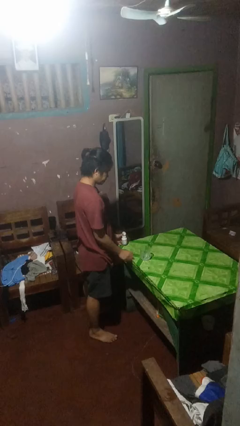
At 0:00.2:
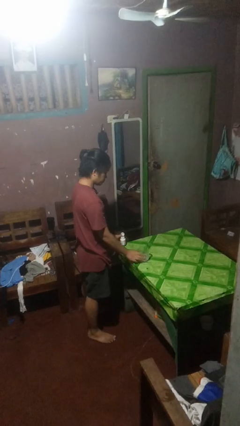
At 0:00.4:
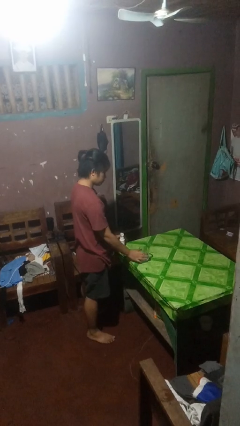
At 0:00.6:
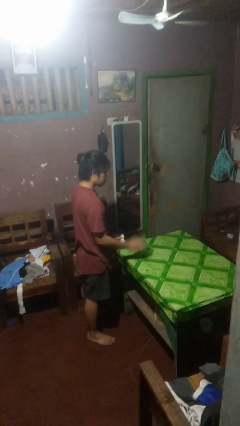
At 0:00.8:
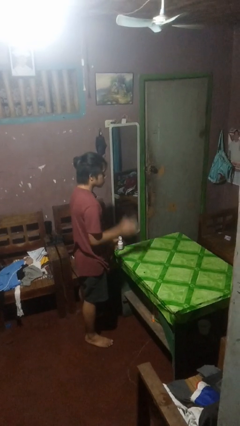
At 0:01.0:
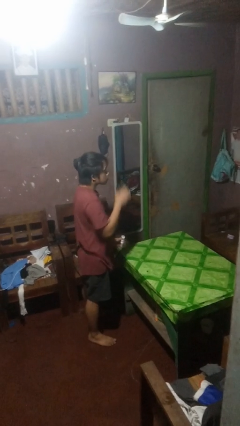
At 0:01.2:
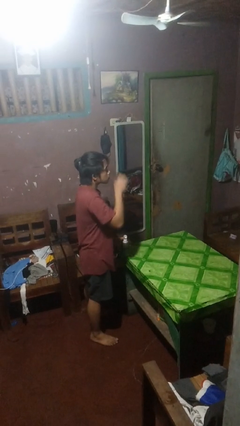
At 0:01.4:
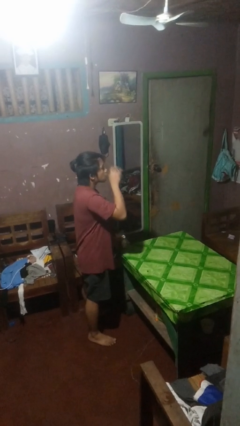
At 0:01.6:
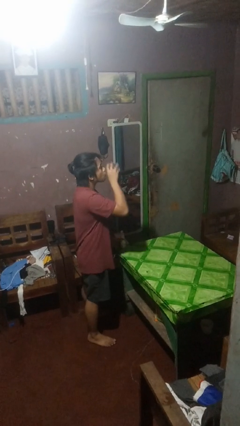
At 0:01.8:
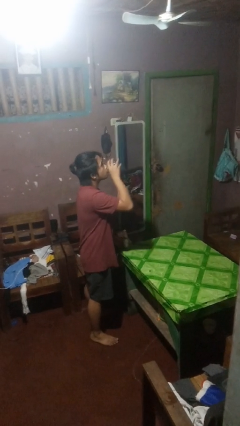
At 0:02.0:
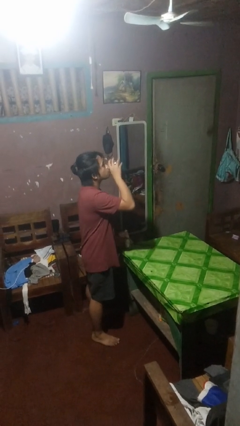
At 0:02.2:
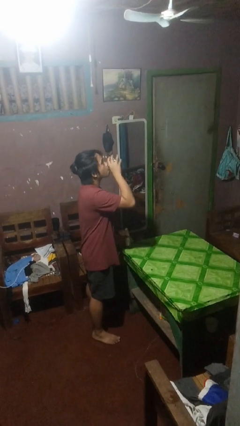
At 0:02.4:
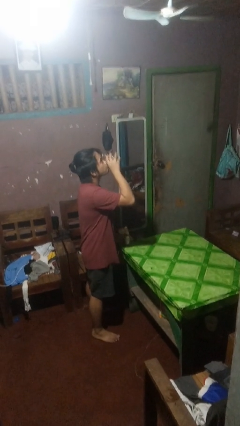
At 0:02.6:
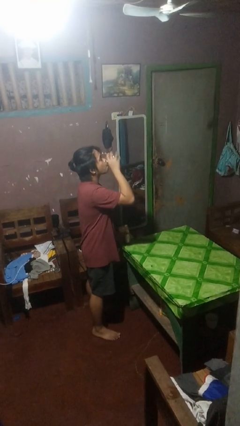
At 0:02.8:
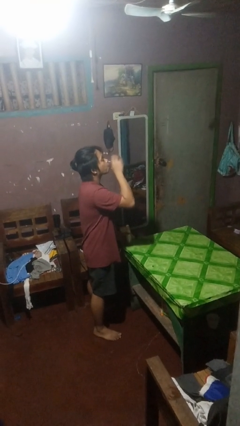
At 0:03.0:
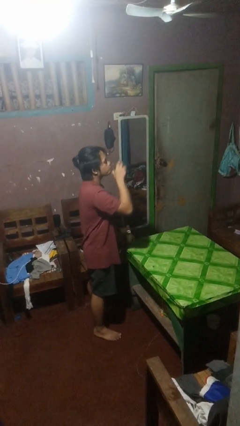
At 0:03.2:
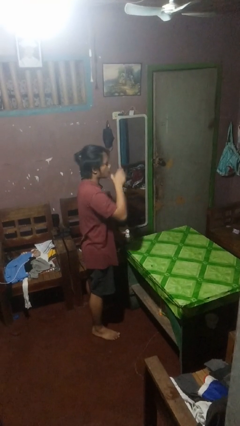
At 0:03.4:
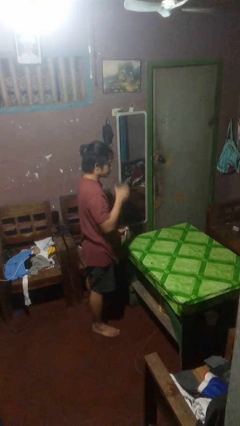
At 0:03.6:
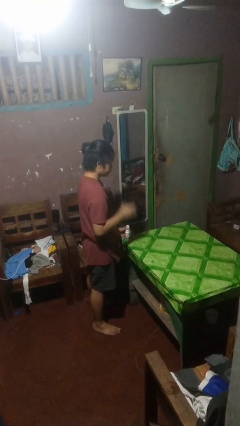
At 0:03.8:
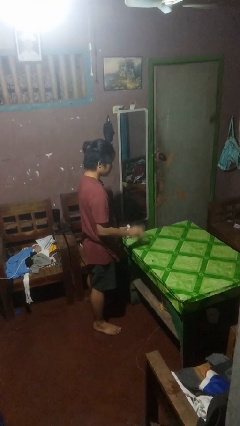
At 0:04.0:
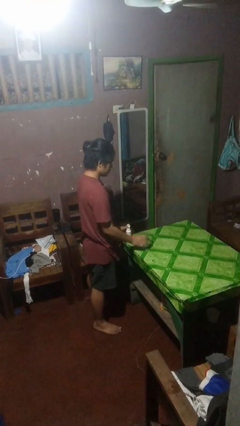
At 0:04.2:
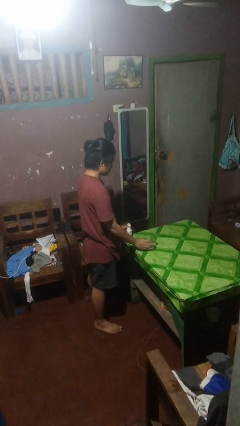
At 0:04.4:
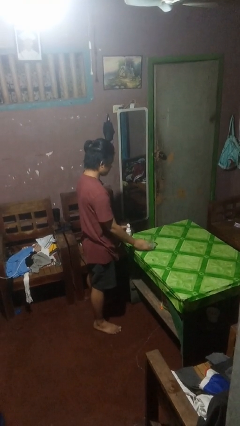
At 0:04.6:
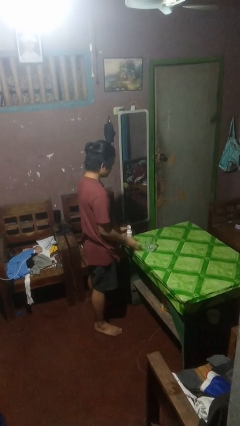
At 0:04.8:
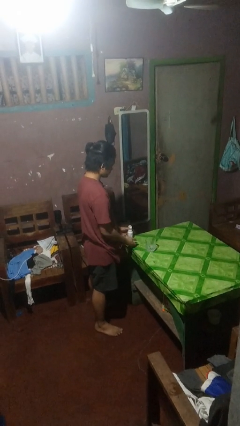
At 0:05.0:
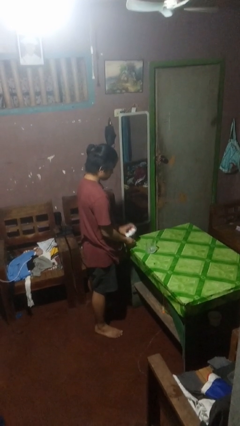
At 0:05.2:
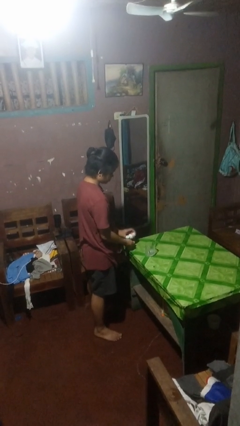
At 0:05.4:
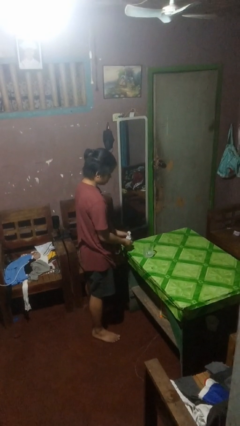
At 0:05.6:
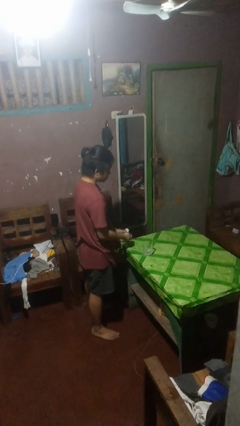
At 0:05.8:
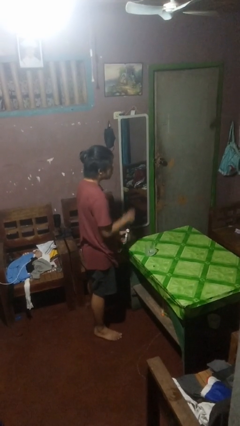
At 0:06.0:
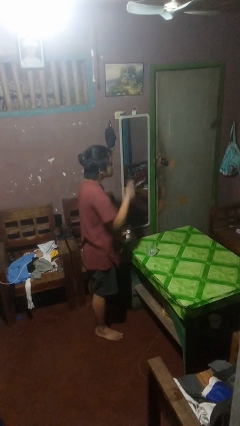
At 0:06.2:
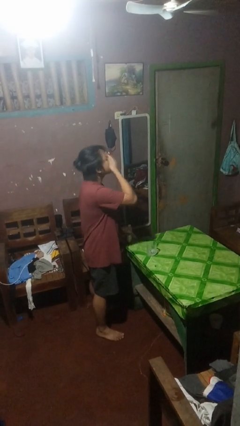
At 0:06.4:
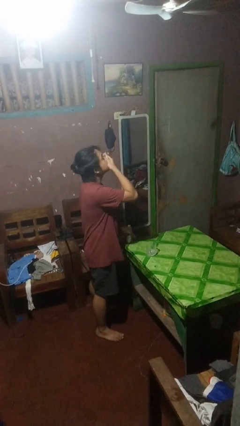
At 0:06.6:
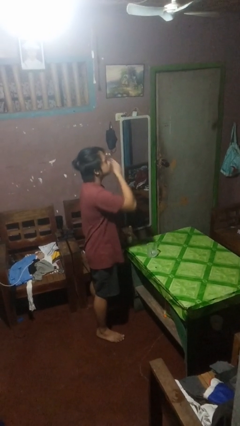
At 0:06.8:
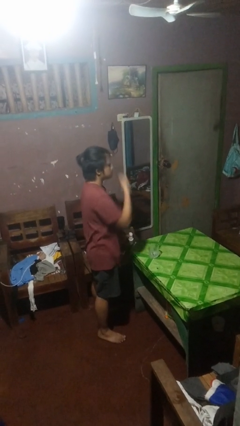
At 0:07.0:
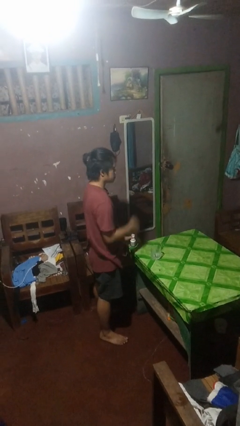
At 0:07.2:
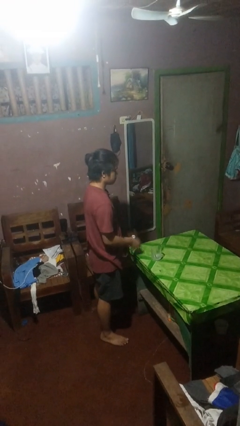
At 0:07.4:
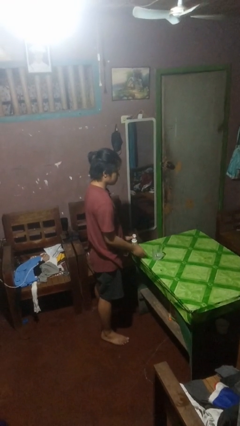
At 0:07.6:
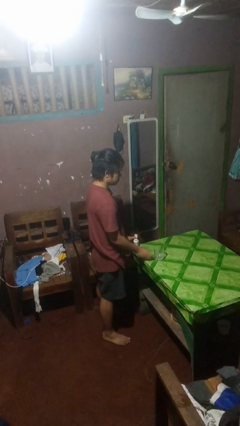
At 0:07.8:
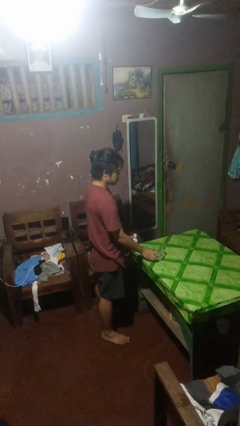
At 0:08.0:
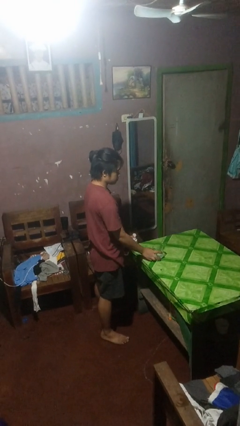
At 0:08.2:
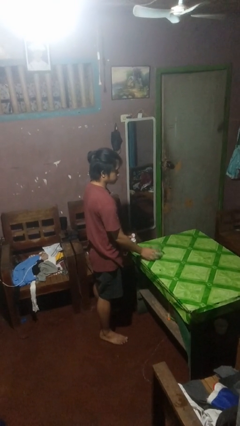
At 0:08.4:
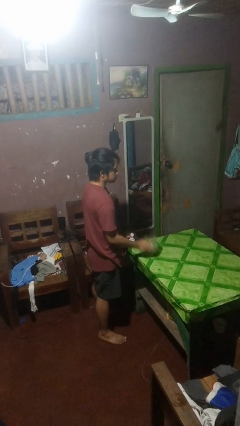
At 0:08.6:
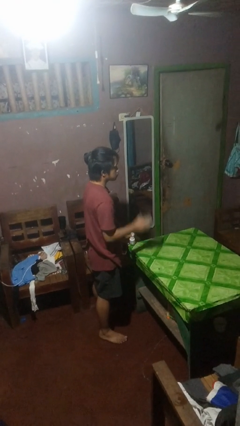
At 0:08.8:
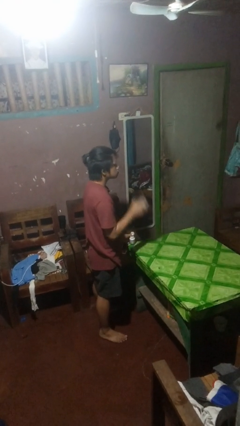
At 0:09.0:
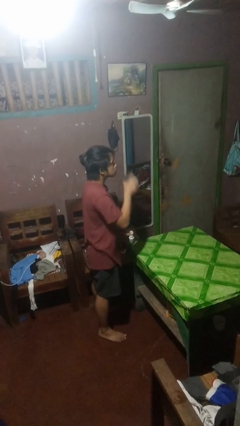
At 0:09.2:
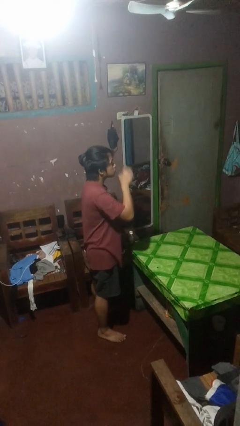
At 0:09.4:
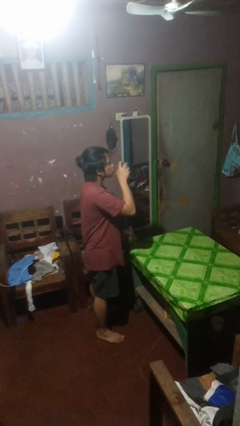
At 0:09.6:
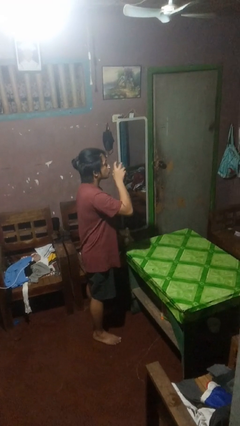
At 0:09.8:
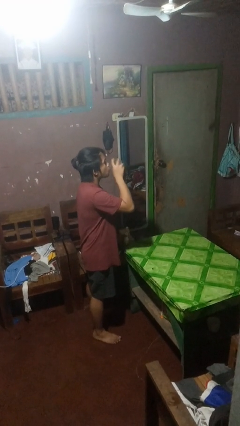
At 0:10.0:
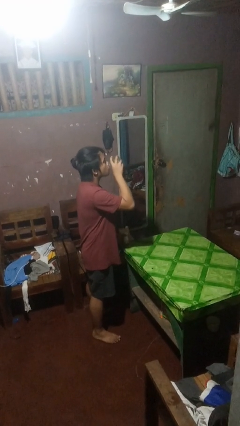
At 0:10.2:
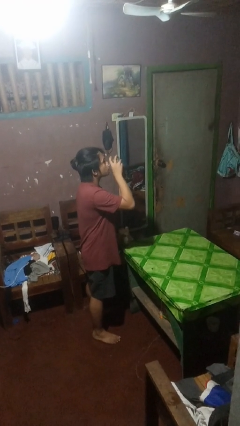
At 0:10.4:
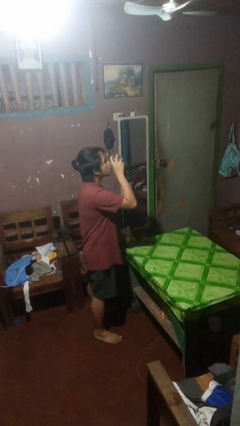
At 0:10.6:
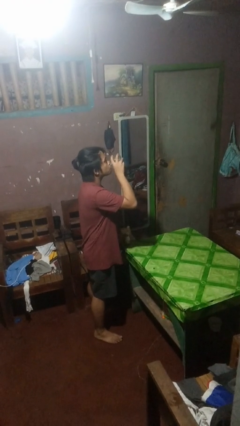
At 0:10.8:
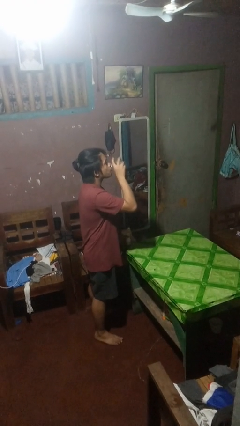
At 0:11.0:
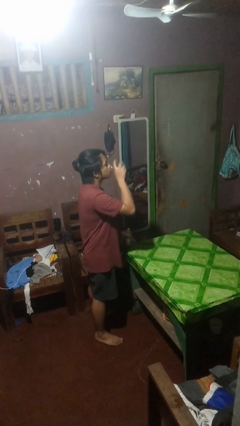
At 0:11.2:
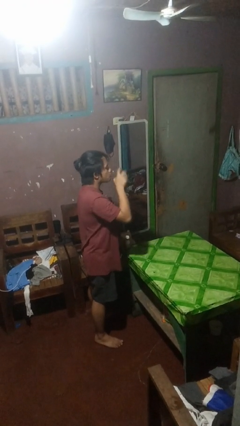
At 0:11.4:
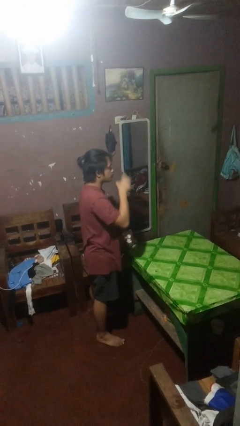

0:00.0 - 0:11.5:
person drinks from cup

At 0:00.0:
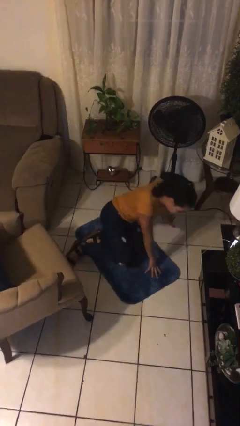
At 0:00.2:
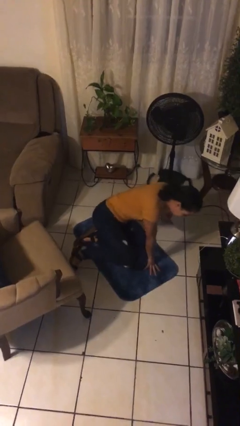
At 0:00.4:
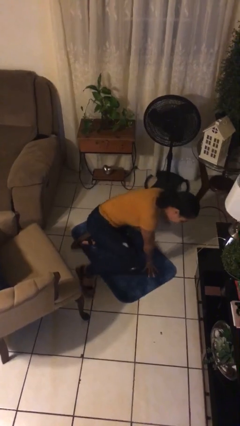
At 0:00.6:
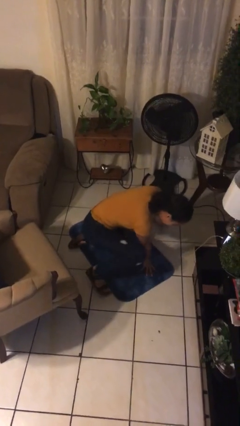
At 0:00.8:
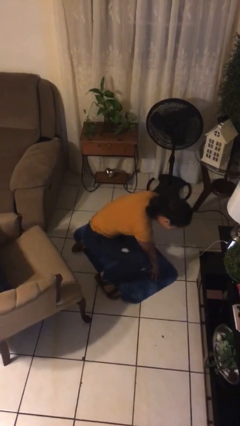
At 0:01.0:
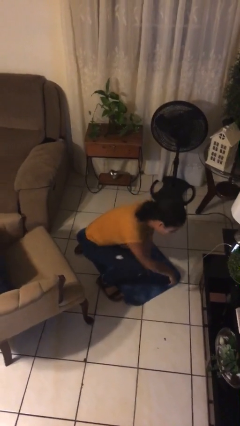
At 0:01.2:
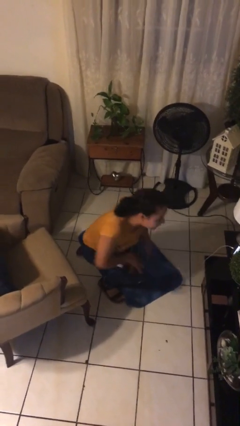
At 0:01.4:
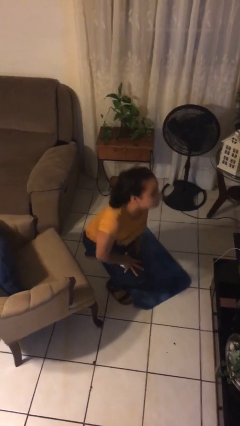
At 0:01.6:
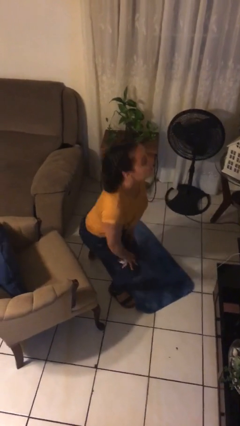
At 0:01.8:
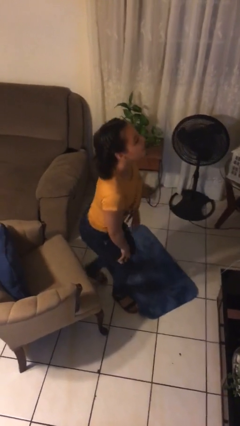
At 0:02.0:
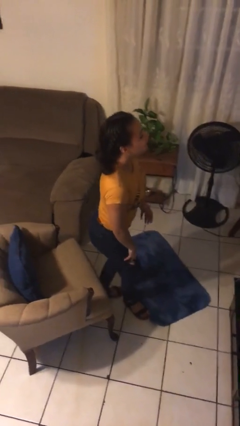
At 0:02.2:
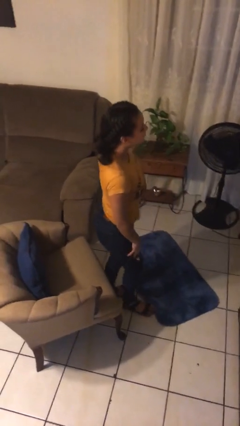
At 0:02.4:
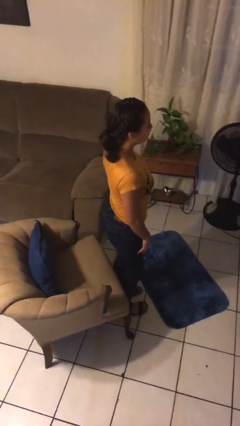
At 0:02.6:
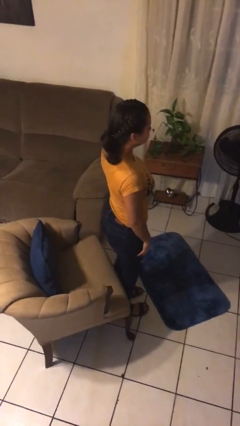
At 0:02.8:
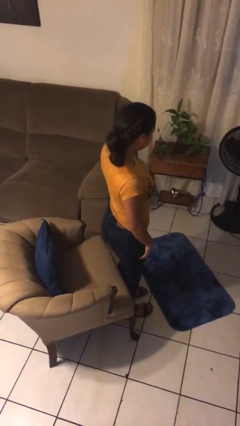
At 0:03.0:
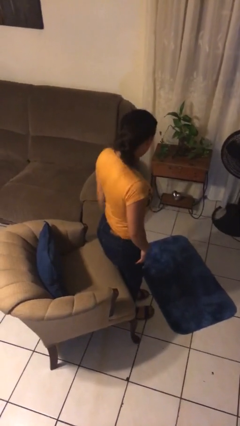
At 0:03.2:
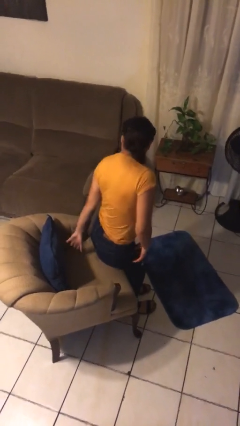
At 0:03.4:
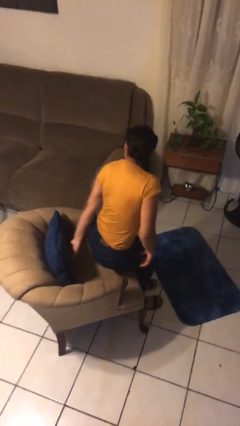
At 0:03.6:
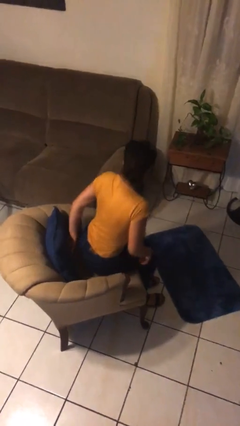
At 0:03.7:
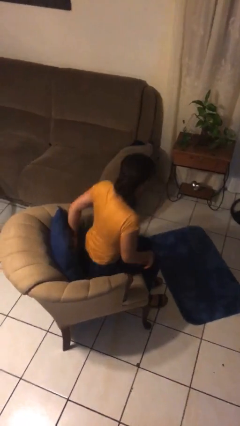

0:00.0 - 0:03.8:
person stands up from floor

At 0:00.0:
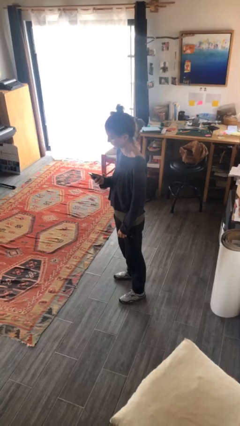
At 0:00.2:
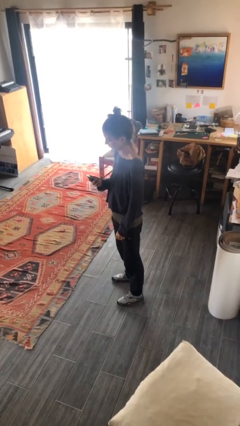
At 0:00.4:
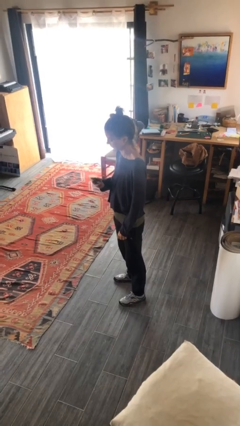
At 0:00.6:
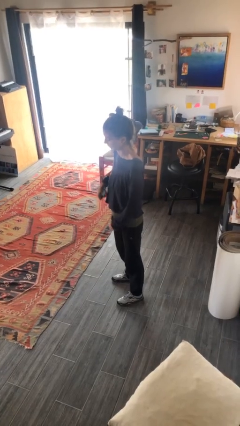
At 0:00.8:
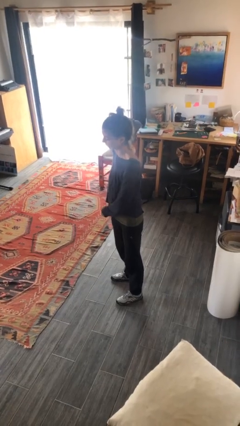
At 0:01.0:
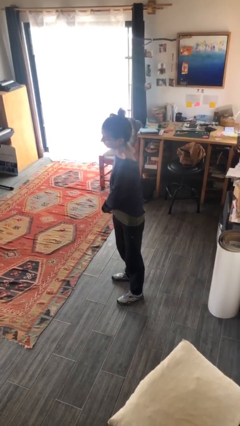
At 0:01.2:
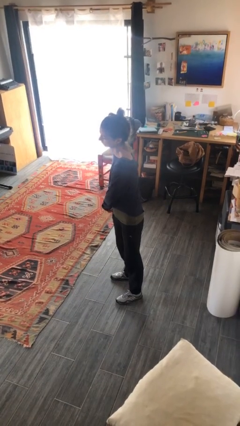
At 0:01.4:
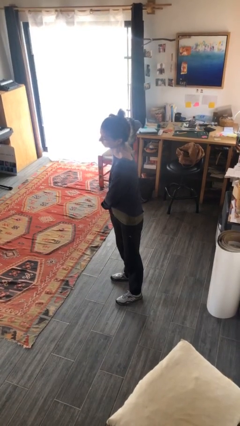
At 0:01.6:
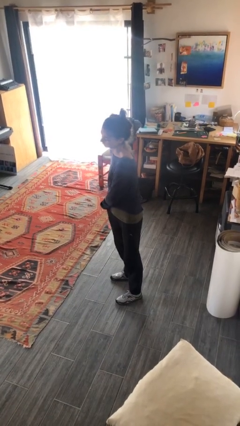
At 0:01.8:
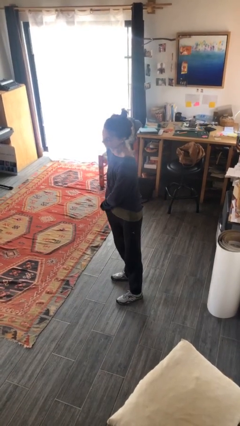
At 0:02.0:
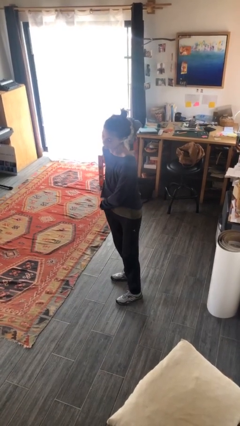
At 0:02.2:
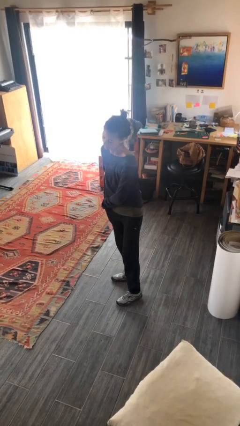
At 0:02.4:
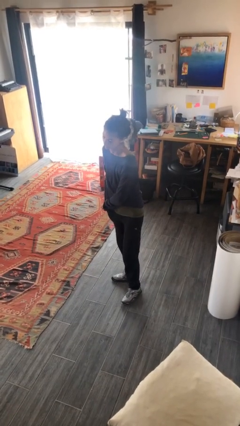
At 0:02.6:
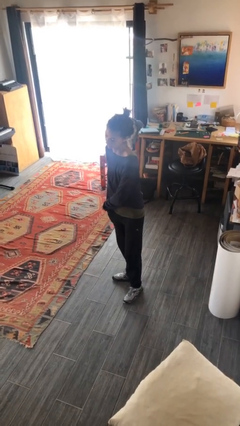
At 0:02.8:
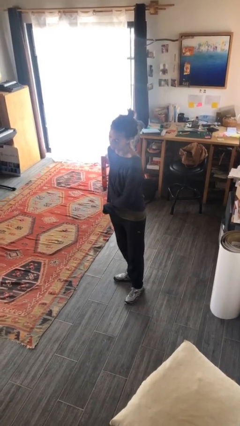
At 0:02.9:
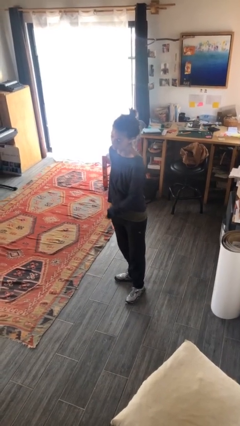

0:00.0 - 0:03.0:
person puts phone into pocket
